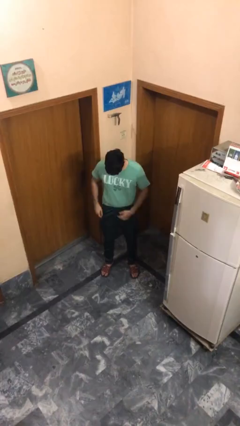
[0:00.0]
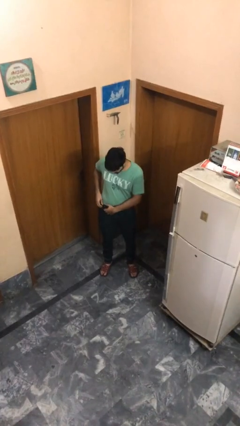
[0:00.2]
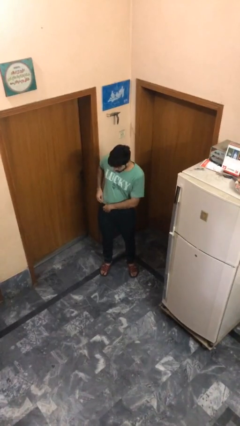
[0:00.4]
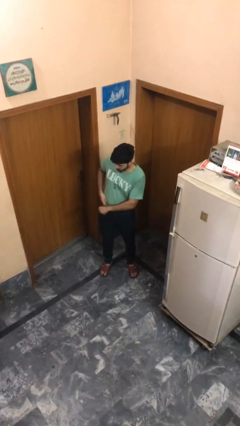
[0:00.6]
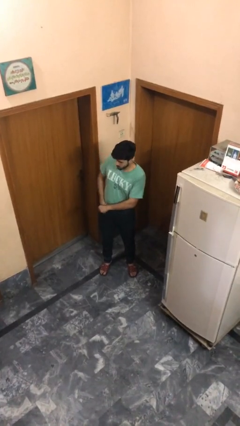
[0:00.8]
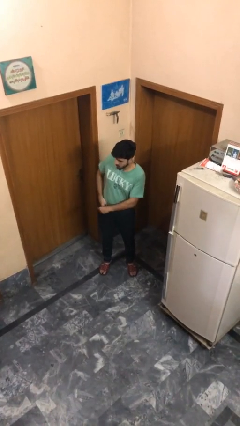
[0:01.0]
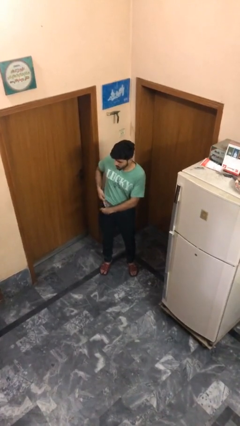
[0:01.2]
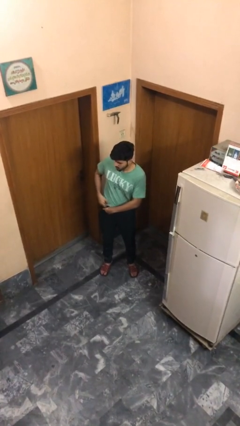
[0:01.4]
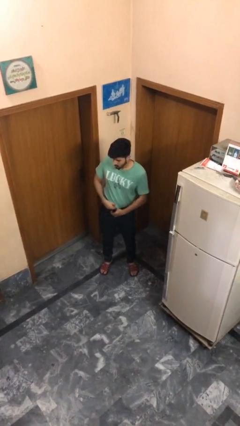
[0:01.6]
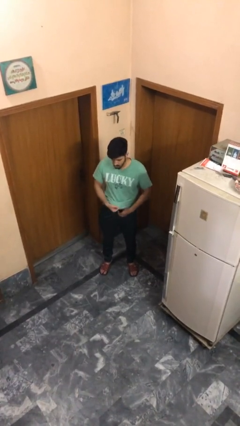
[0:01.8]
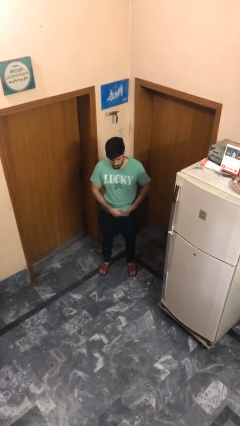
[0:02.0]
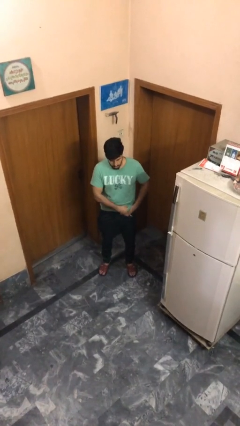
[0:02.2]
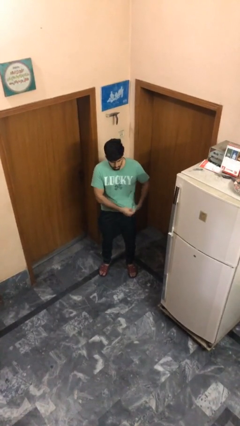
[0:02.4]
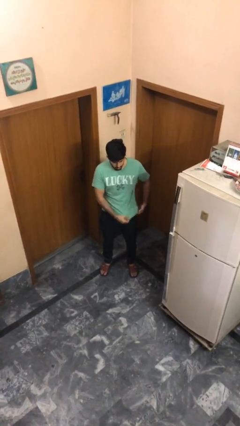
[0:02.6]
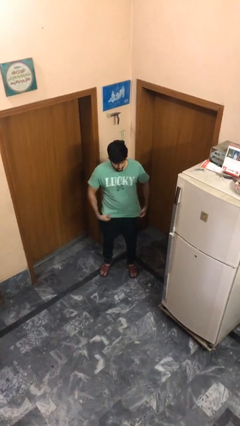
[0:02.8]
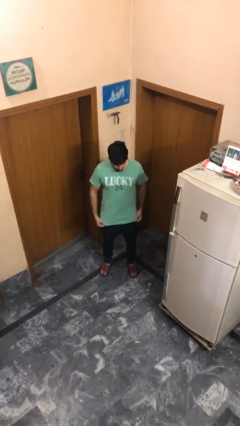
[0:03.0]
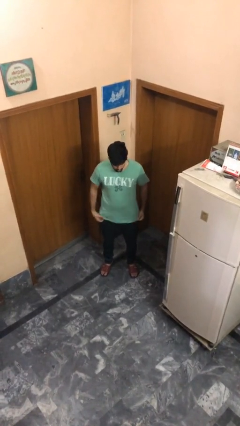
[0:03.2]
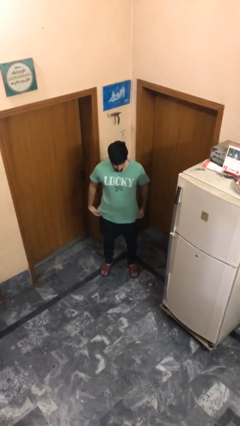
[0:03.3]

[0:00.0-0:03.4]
person untucks shirt

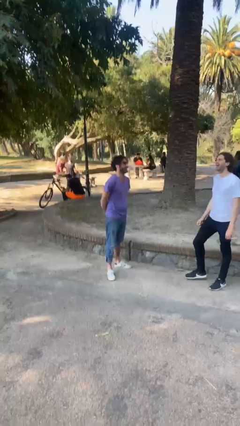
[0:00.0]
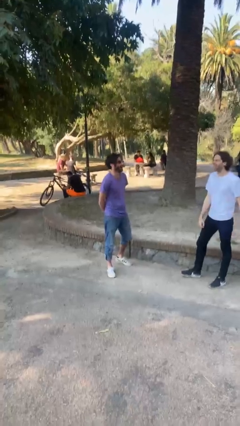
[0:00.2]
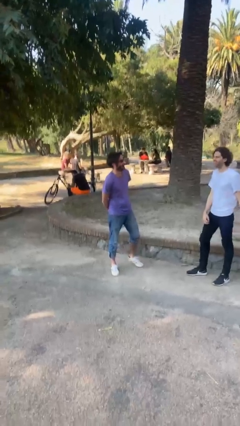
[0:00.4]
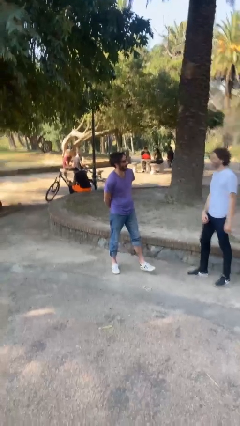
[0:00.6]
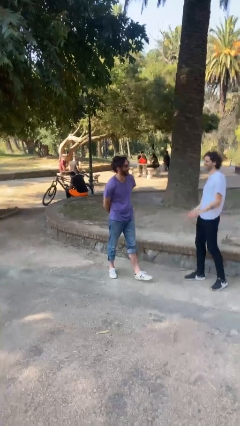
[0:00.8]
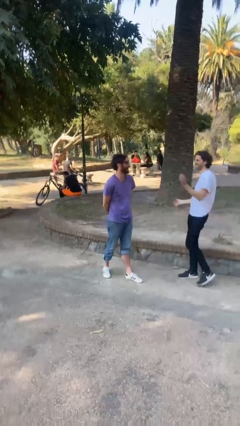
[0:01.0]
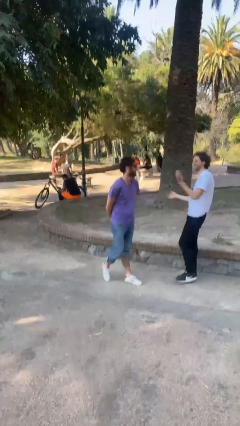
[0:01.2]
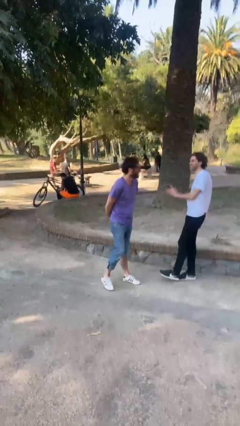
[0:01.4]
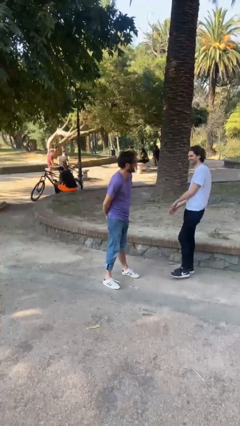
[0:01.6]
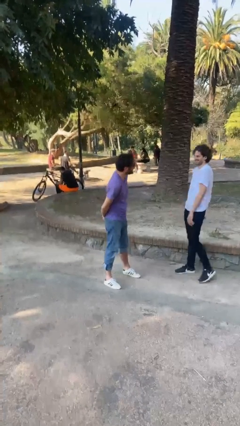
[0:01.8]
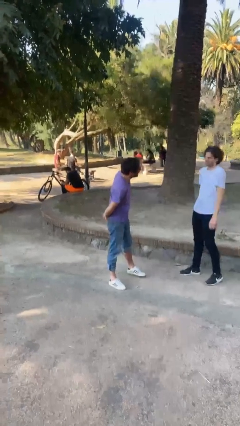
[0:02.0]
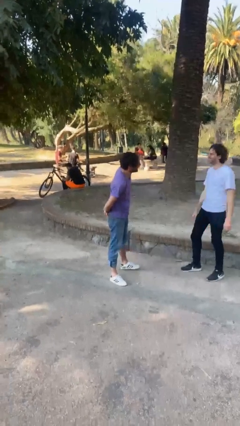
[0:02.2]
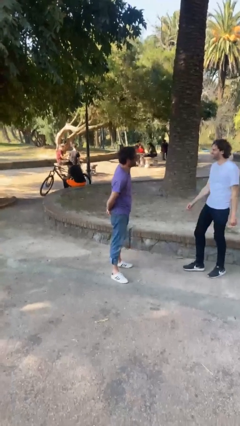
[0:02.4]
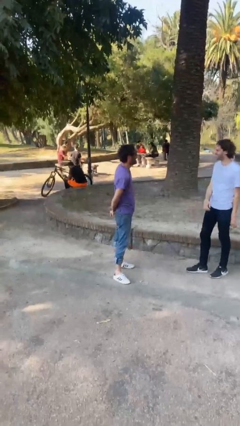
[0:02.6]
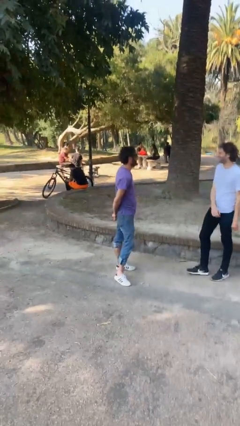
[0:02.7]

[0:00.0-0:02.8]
person laughs with person

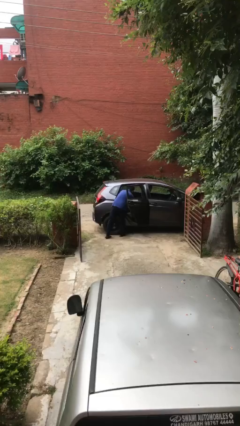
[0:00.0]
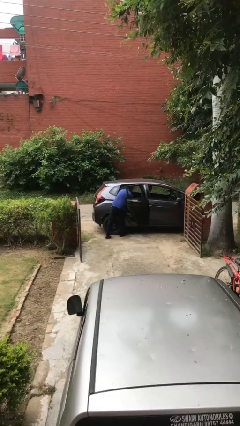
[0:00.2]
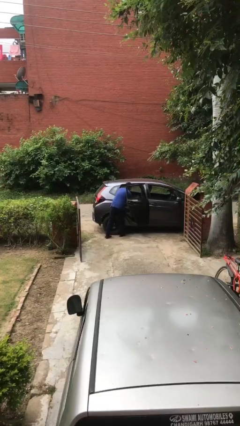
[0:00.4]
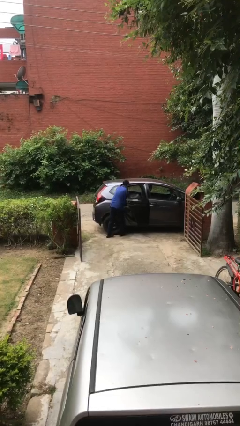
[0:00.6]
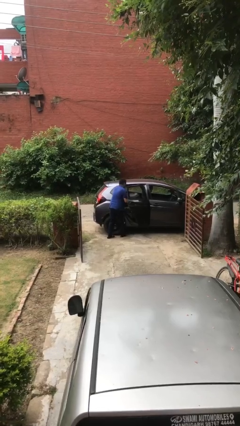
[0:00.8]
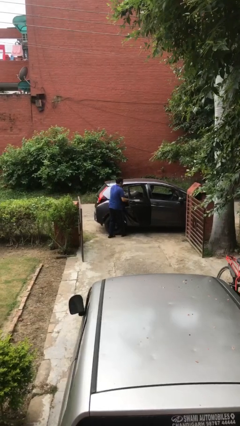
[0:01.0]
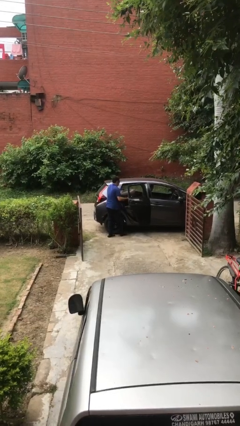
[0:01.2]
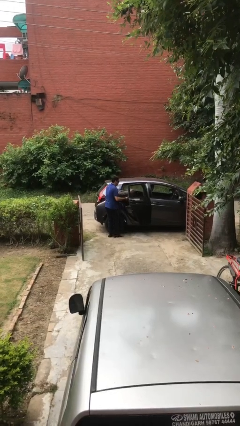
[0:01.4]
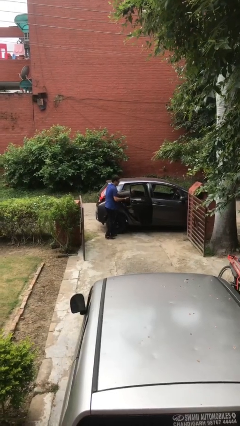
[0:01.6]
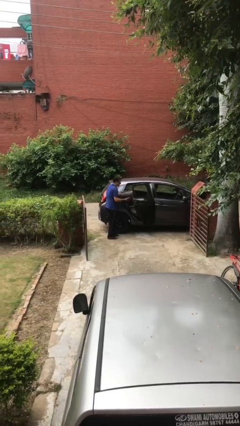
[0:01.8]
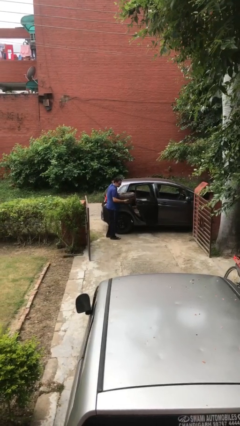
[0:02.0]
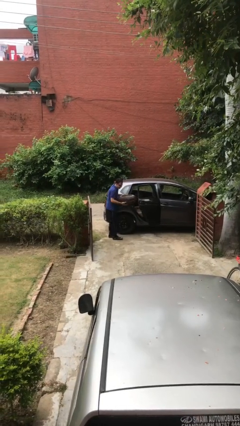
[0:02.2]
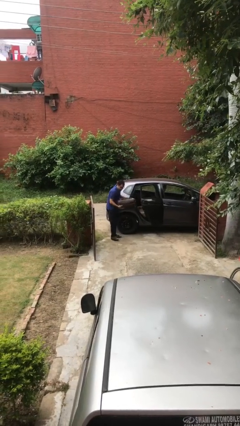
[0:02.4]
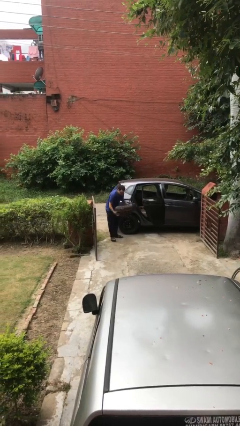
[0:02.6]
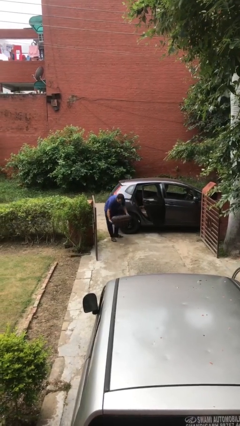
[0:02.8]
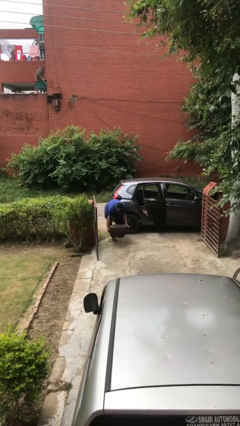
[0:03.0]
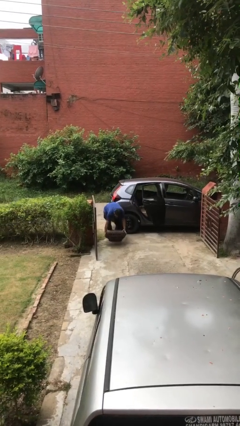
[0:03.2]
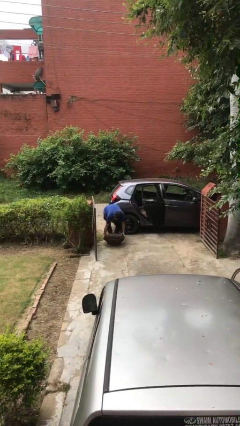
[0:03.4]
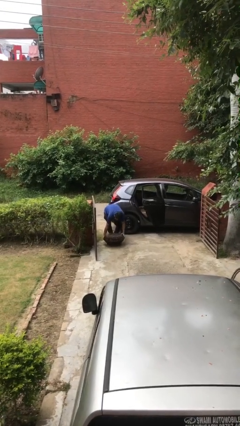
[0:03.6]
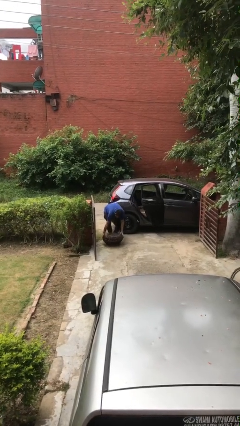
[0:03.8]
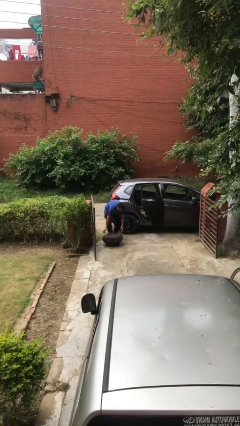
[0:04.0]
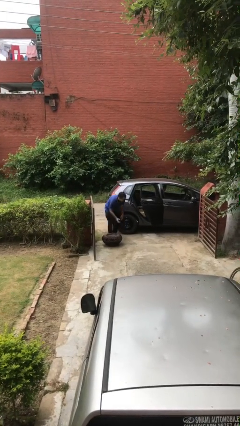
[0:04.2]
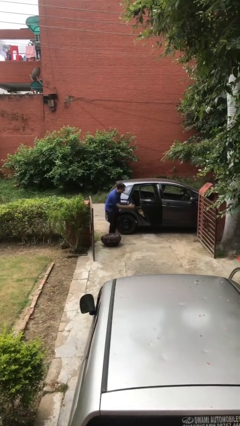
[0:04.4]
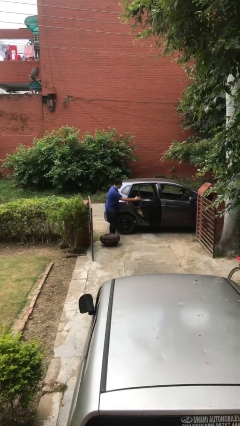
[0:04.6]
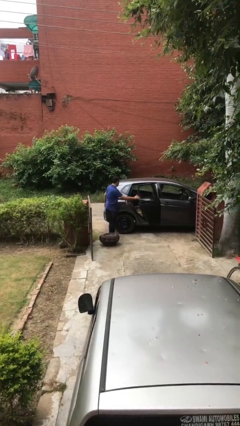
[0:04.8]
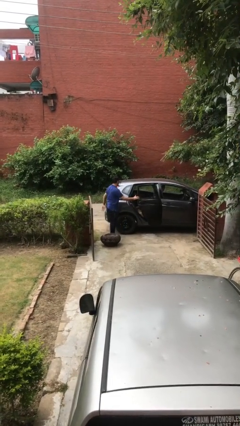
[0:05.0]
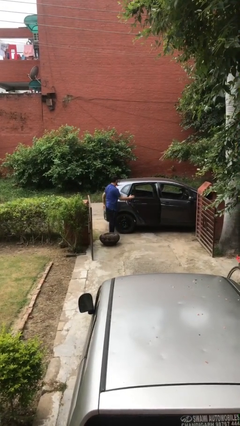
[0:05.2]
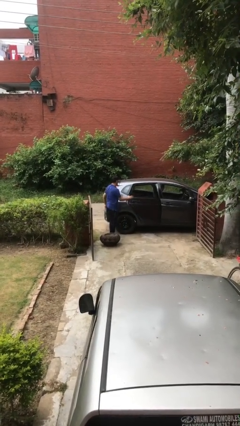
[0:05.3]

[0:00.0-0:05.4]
person unloads car

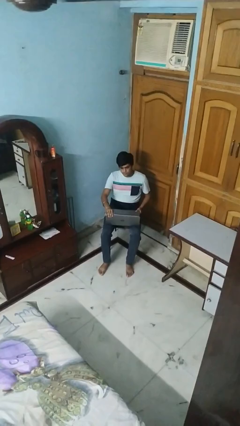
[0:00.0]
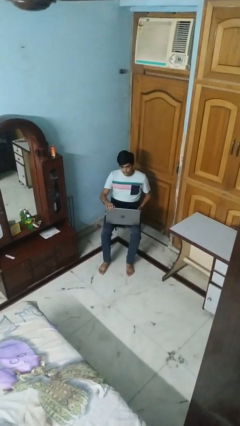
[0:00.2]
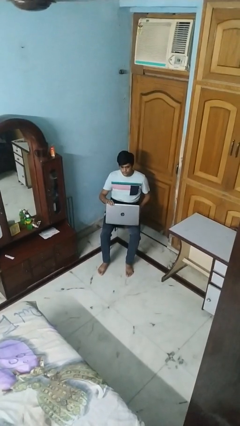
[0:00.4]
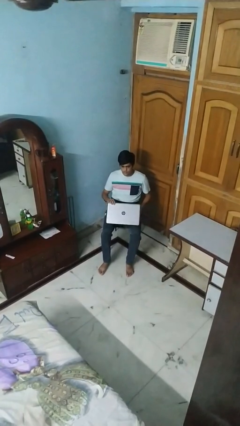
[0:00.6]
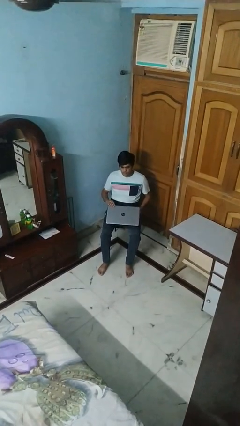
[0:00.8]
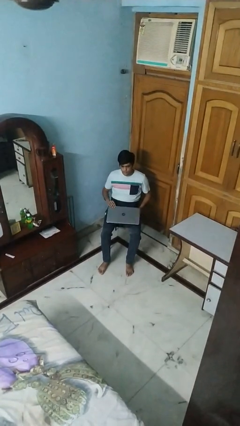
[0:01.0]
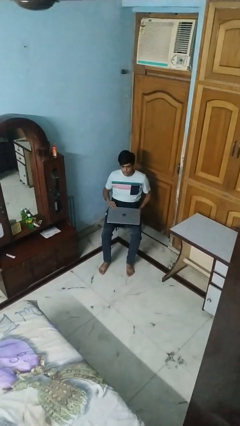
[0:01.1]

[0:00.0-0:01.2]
person closes laptop

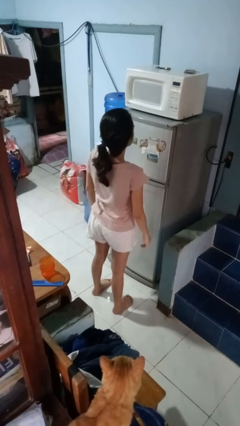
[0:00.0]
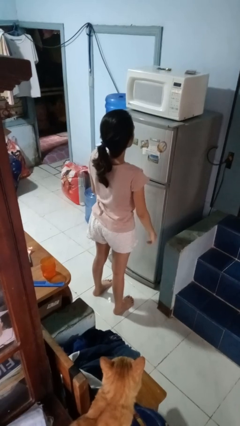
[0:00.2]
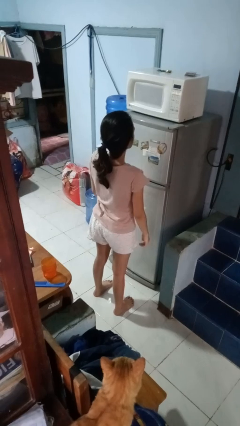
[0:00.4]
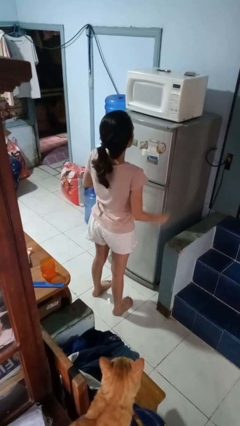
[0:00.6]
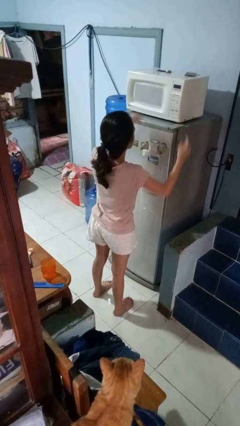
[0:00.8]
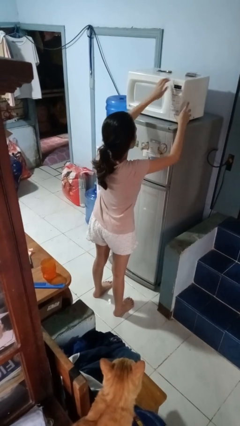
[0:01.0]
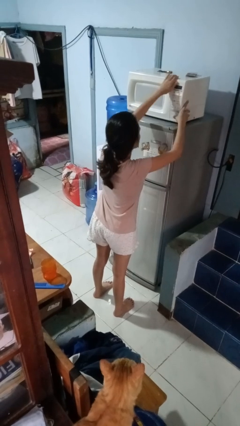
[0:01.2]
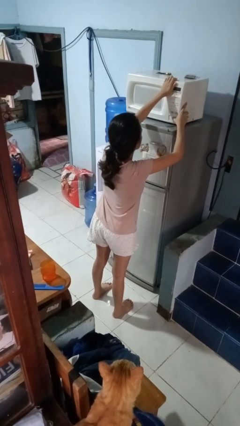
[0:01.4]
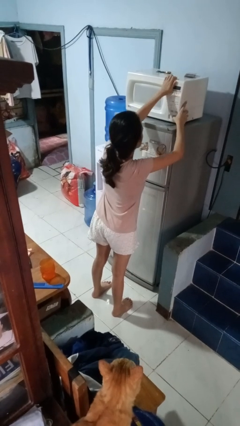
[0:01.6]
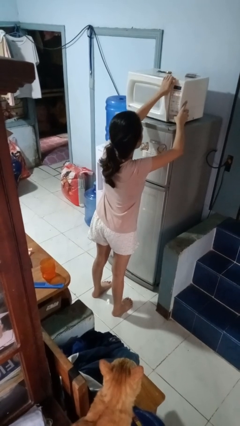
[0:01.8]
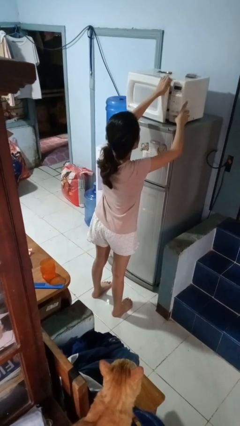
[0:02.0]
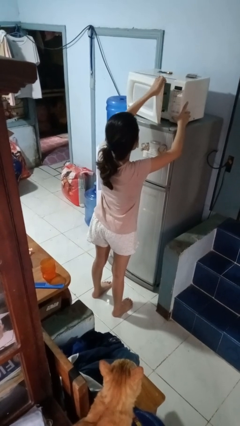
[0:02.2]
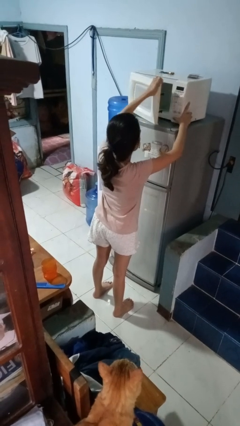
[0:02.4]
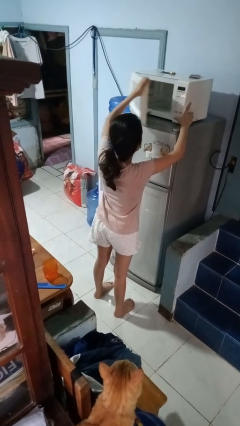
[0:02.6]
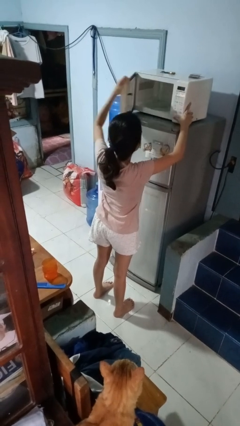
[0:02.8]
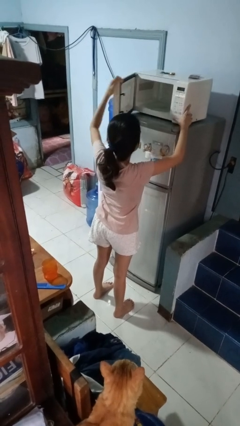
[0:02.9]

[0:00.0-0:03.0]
person opens microwave

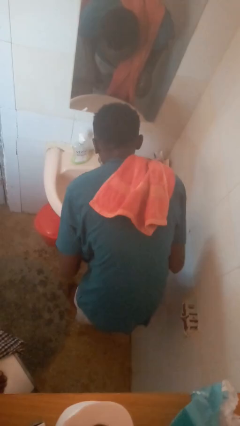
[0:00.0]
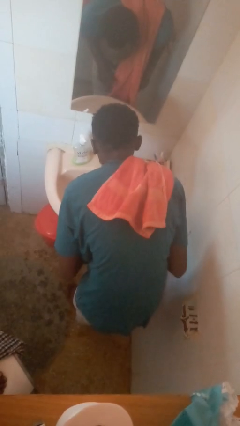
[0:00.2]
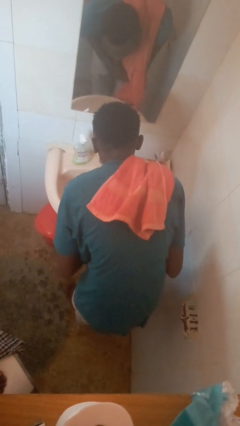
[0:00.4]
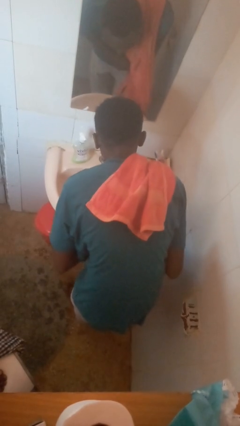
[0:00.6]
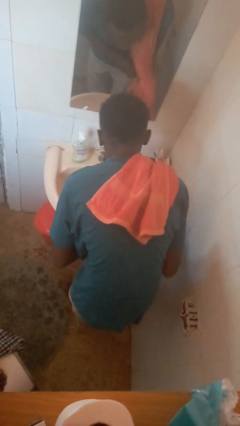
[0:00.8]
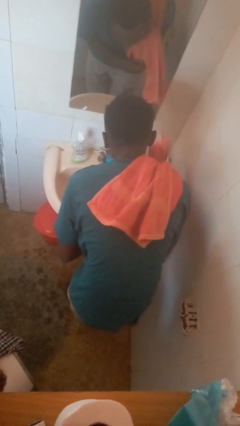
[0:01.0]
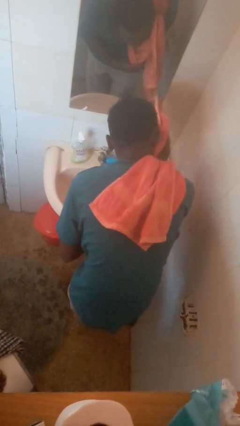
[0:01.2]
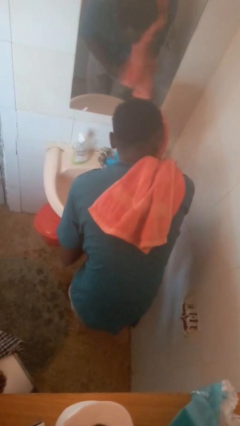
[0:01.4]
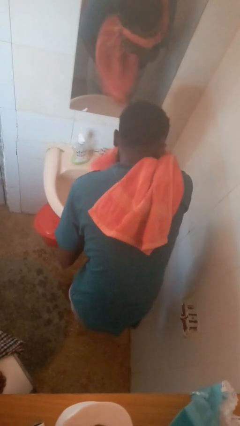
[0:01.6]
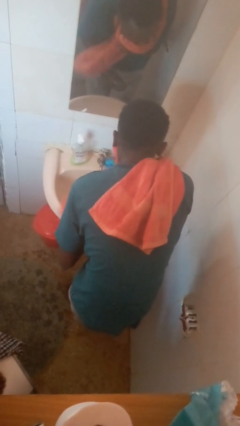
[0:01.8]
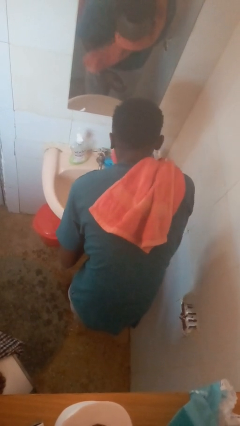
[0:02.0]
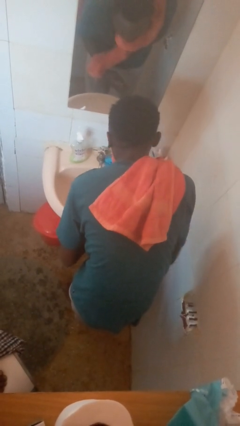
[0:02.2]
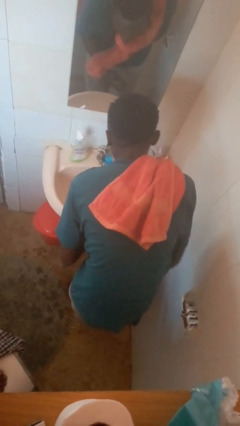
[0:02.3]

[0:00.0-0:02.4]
person dries face with towel
